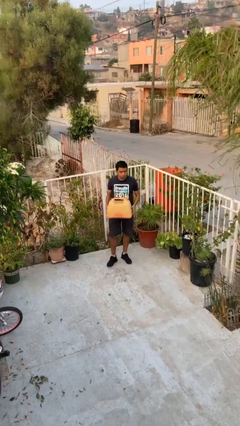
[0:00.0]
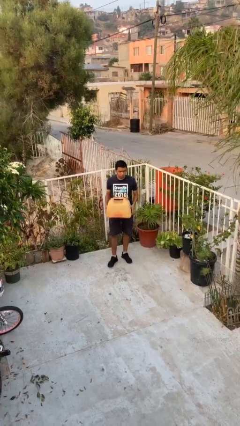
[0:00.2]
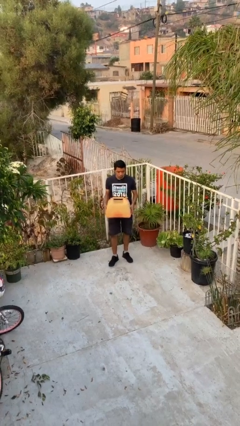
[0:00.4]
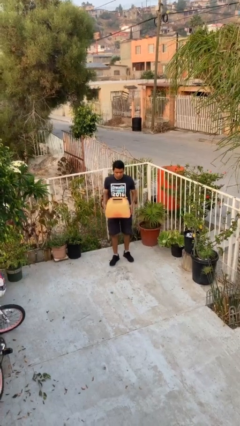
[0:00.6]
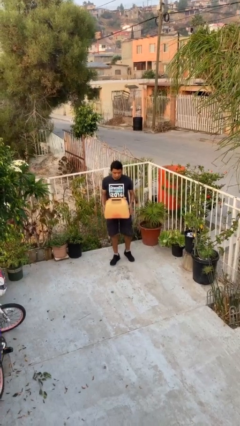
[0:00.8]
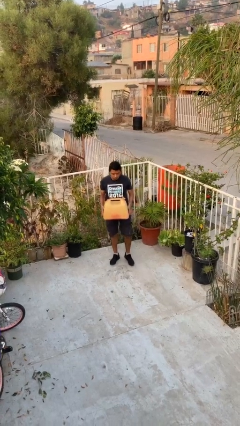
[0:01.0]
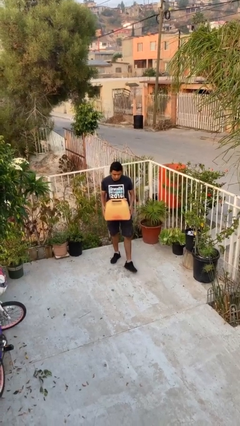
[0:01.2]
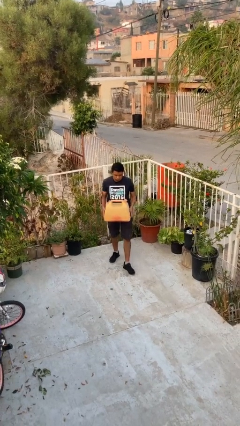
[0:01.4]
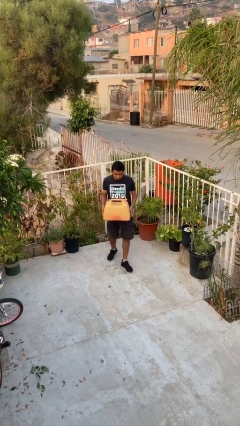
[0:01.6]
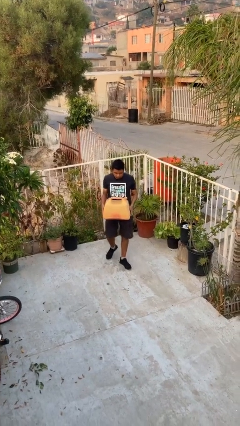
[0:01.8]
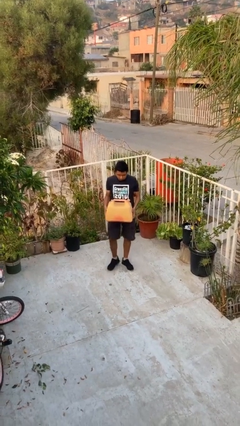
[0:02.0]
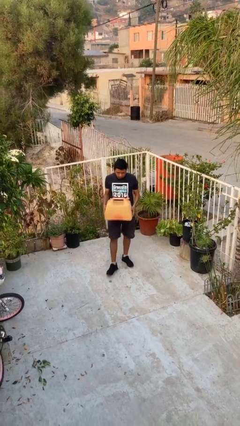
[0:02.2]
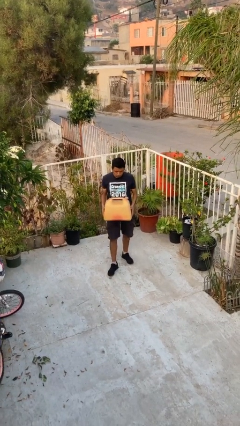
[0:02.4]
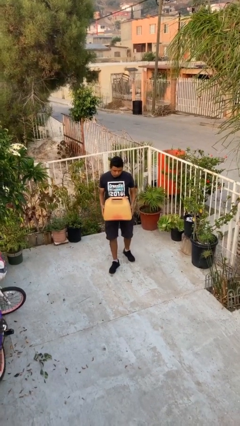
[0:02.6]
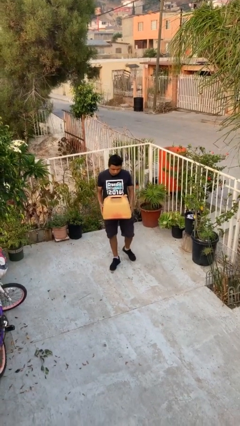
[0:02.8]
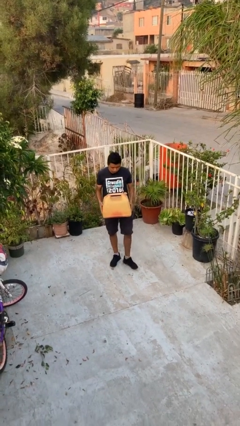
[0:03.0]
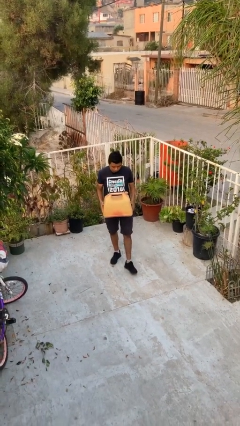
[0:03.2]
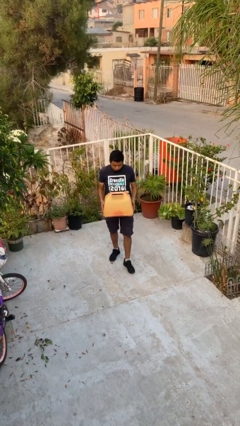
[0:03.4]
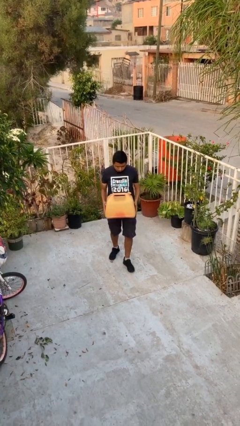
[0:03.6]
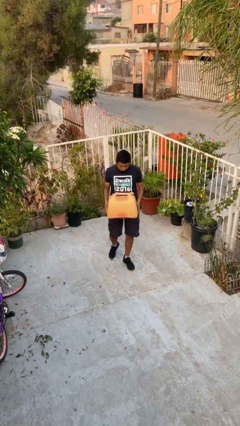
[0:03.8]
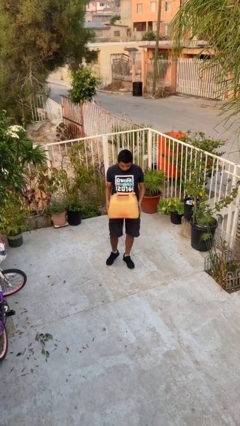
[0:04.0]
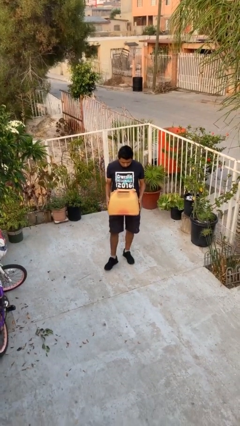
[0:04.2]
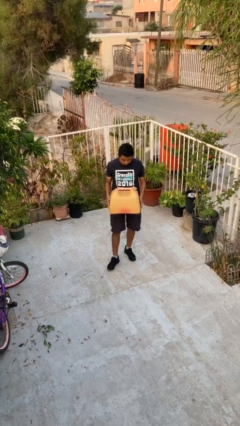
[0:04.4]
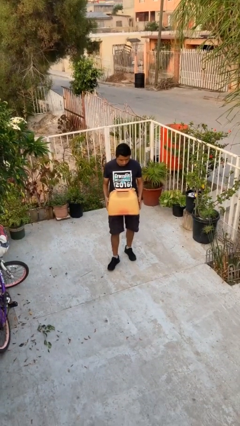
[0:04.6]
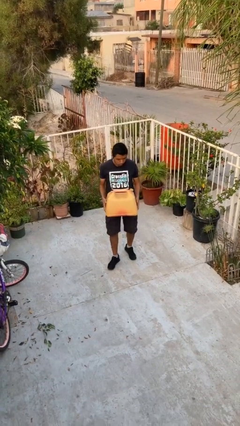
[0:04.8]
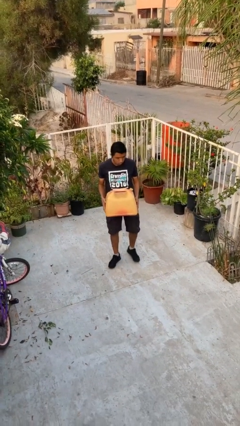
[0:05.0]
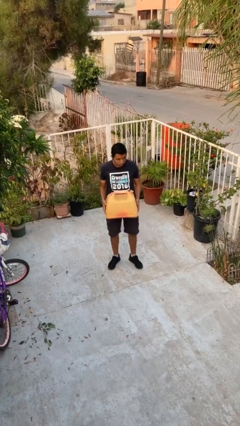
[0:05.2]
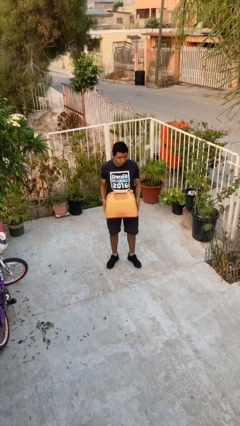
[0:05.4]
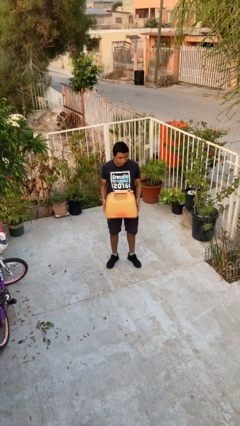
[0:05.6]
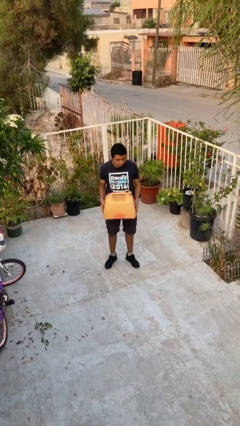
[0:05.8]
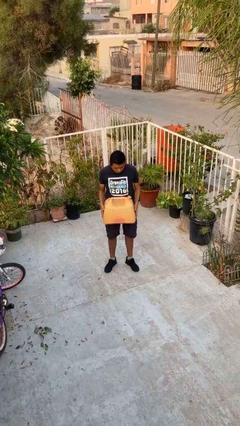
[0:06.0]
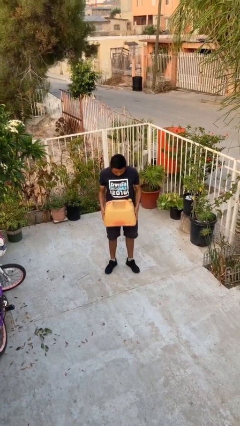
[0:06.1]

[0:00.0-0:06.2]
person carries heavy object

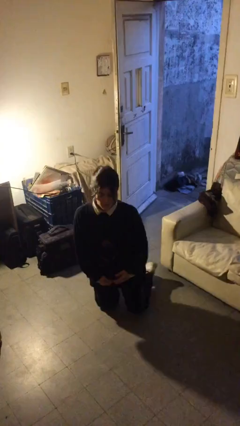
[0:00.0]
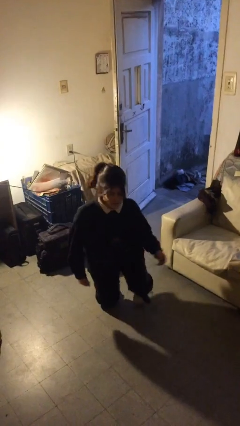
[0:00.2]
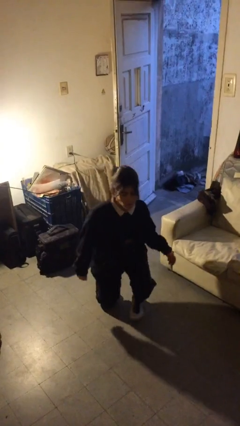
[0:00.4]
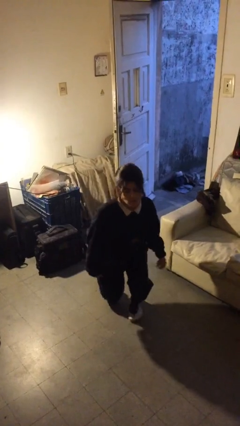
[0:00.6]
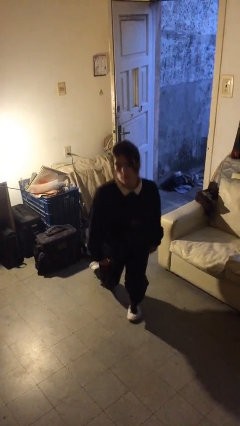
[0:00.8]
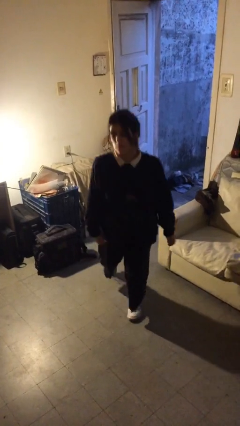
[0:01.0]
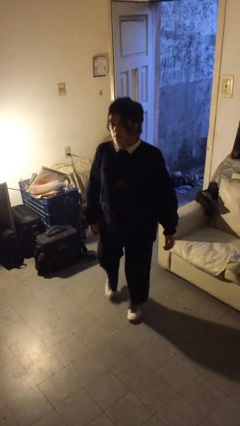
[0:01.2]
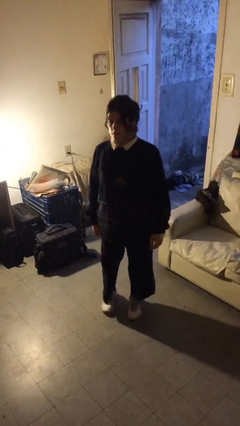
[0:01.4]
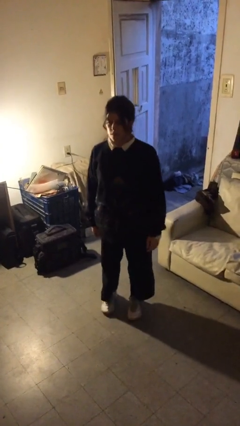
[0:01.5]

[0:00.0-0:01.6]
person stands up from floor

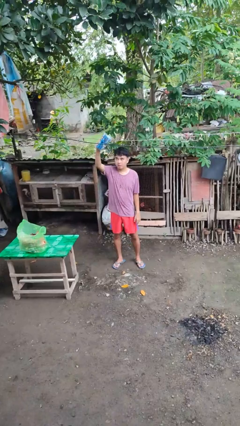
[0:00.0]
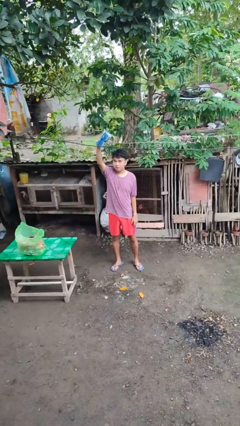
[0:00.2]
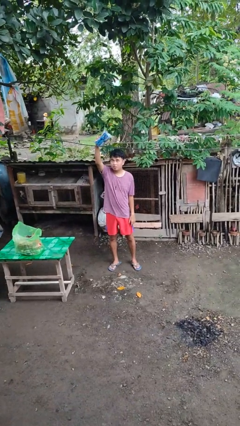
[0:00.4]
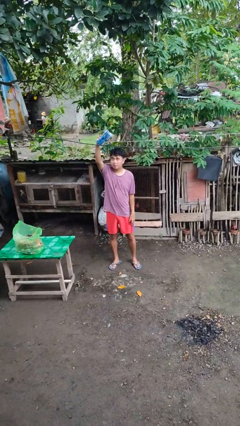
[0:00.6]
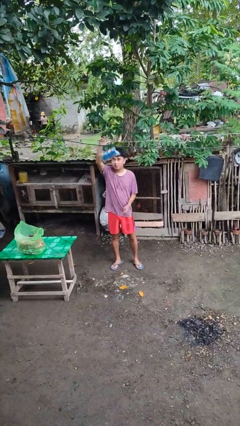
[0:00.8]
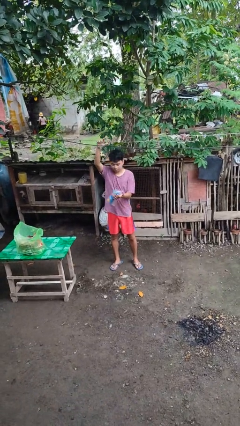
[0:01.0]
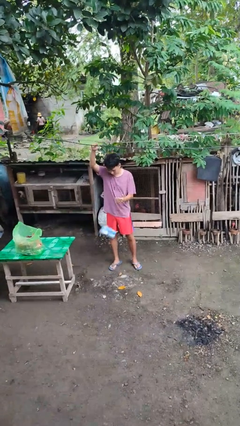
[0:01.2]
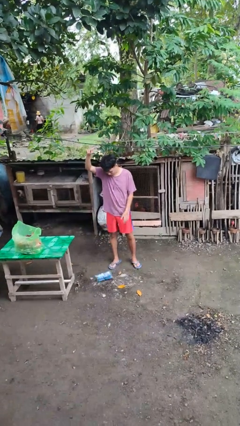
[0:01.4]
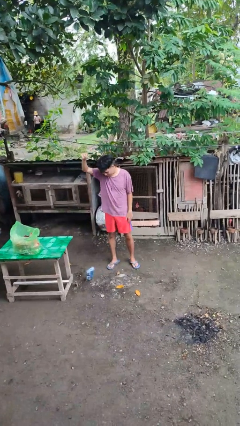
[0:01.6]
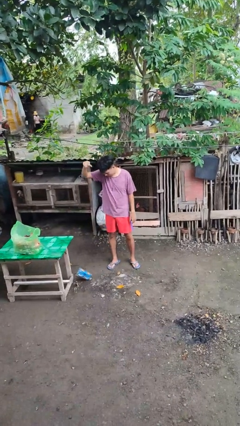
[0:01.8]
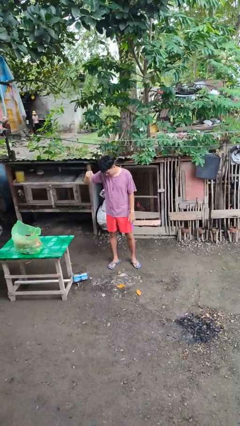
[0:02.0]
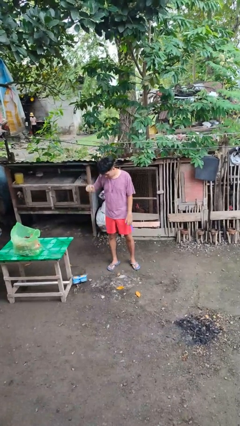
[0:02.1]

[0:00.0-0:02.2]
person drops object

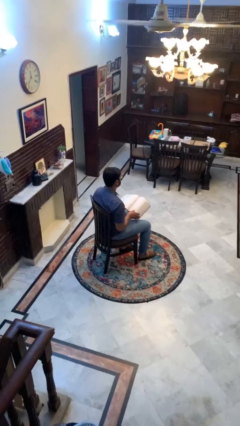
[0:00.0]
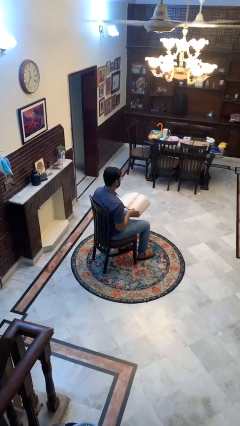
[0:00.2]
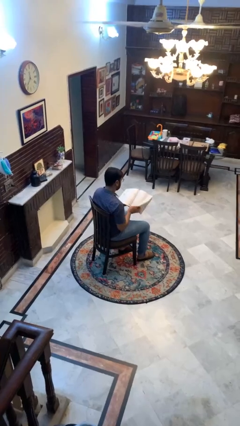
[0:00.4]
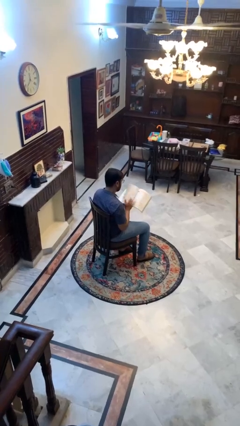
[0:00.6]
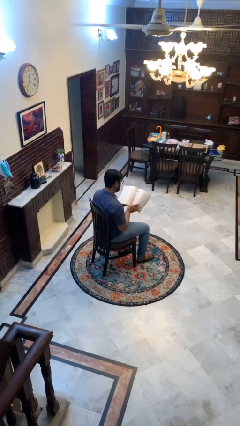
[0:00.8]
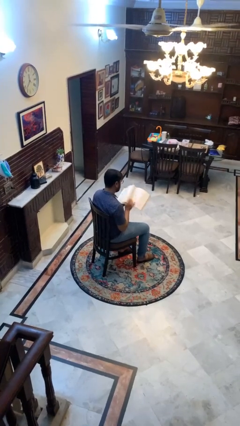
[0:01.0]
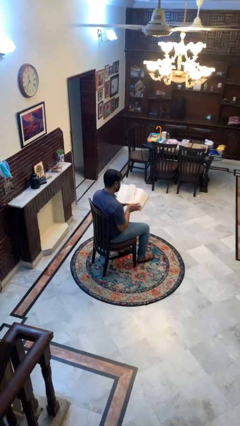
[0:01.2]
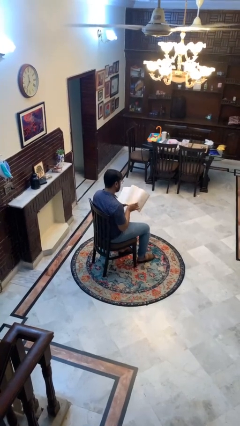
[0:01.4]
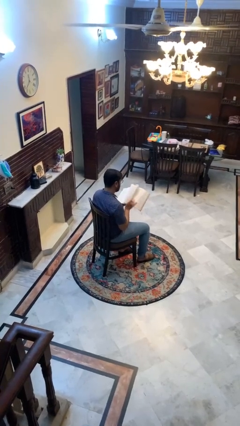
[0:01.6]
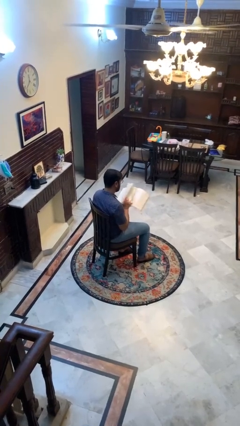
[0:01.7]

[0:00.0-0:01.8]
person reads book

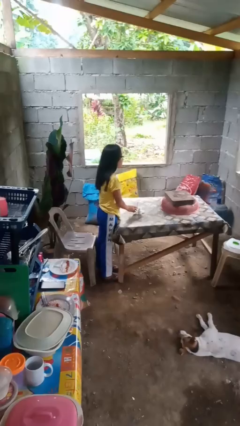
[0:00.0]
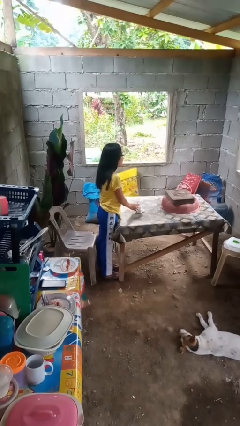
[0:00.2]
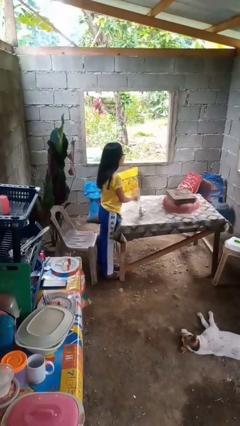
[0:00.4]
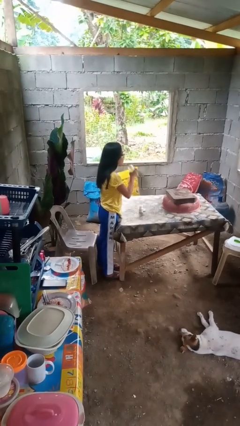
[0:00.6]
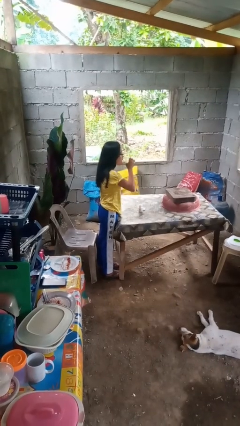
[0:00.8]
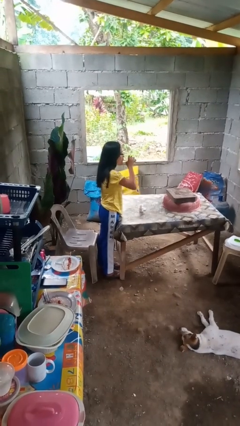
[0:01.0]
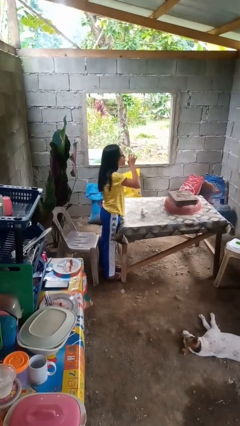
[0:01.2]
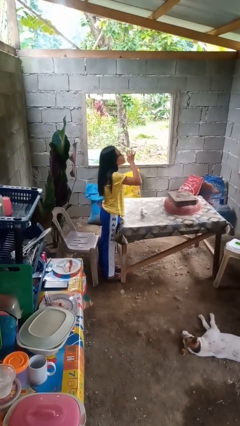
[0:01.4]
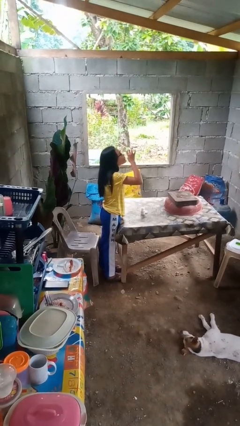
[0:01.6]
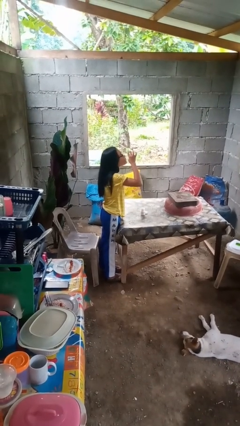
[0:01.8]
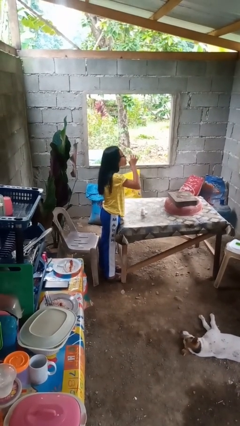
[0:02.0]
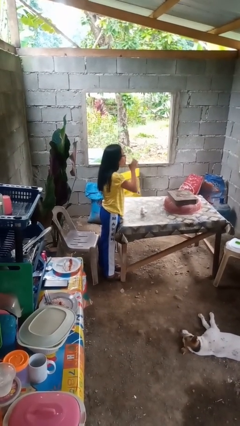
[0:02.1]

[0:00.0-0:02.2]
person drinks from cup

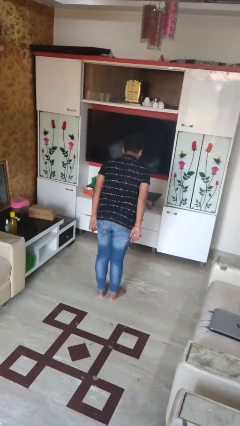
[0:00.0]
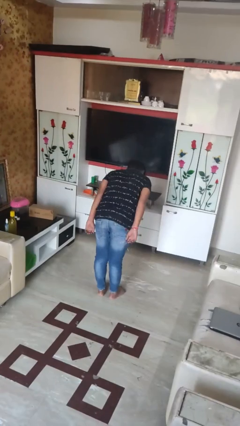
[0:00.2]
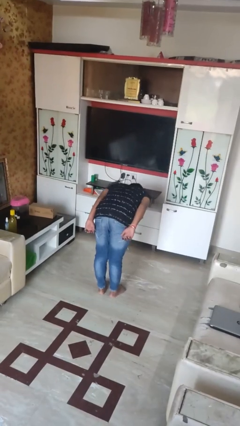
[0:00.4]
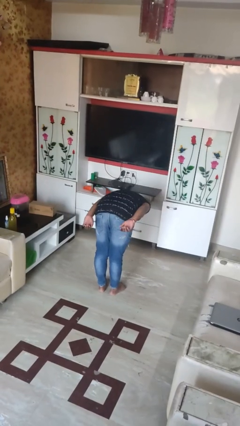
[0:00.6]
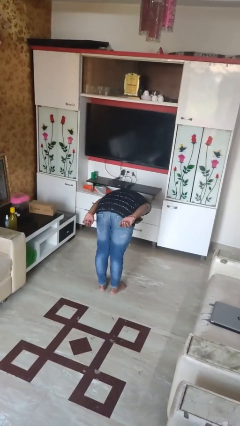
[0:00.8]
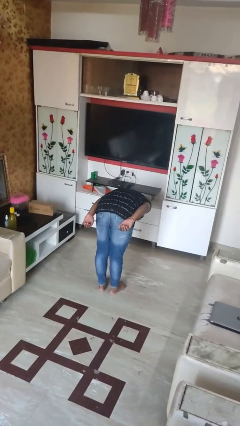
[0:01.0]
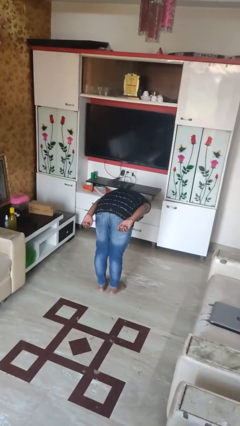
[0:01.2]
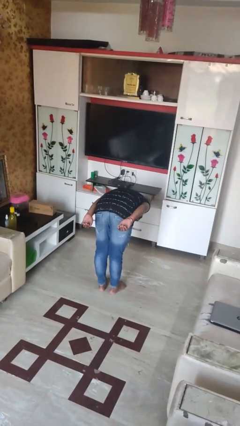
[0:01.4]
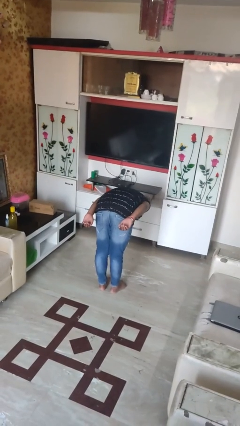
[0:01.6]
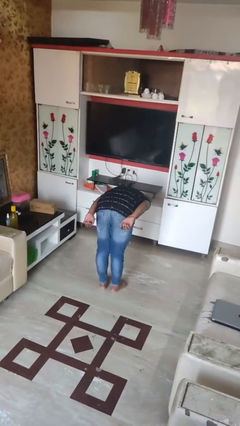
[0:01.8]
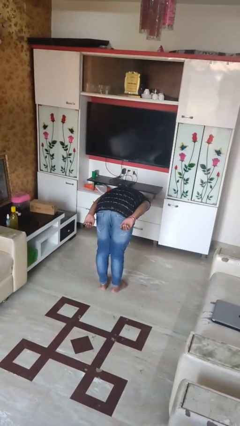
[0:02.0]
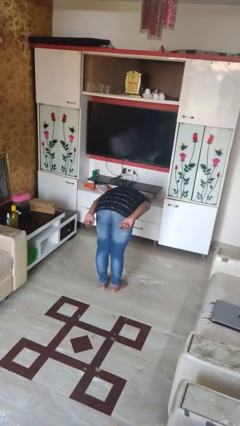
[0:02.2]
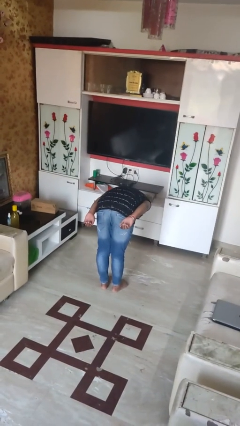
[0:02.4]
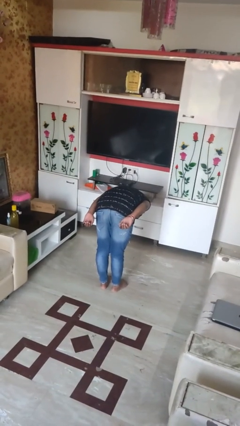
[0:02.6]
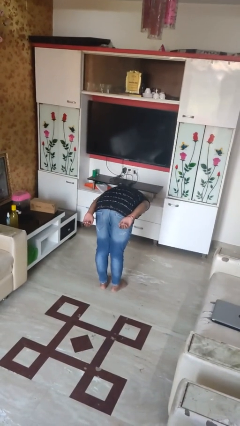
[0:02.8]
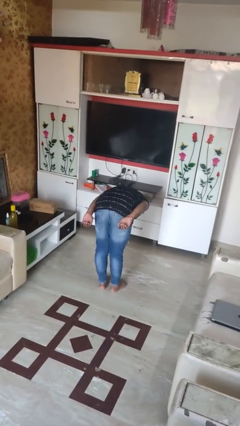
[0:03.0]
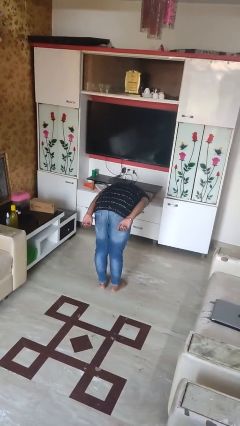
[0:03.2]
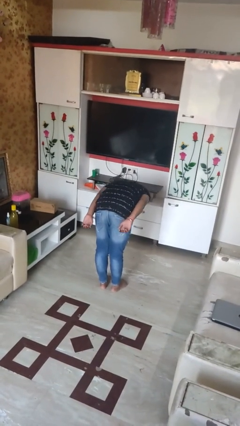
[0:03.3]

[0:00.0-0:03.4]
person bows
